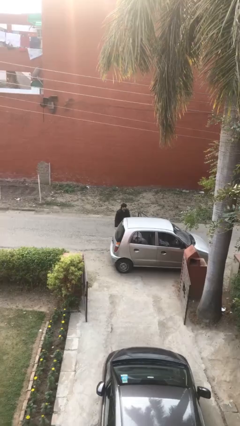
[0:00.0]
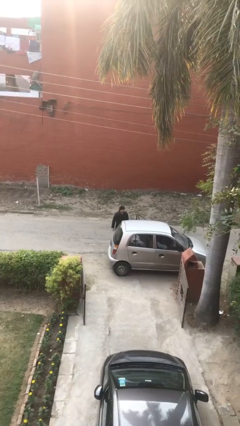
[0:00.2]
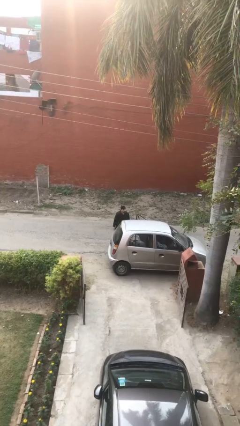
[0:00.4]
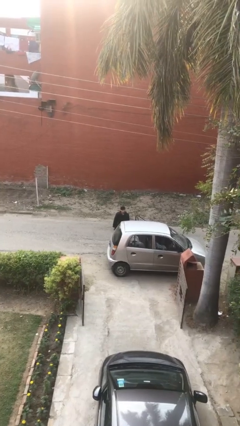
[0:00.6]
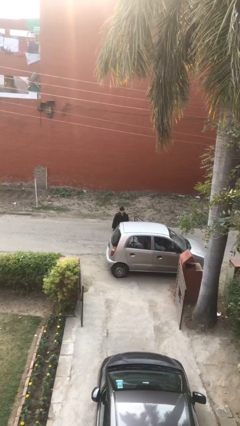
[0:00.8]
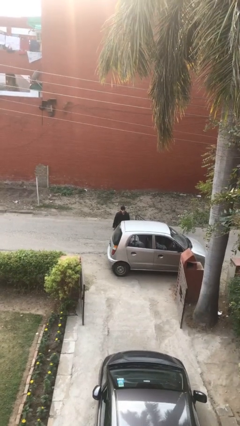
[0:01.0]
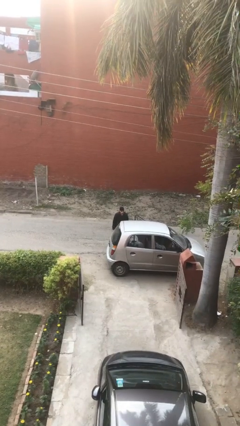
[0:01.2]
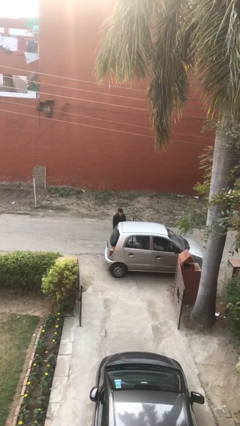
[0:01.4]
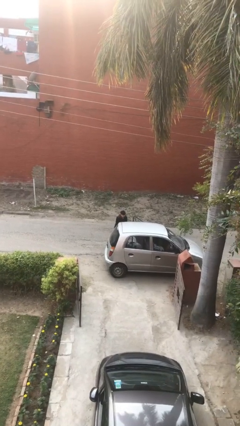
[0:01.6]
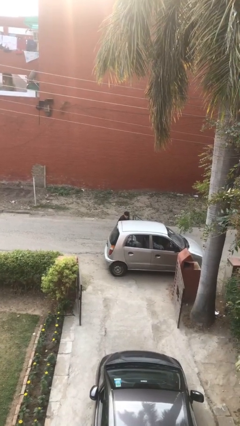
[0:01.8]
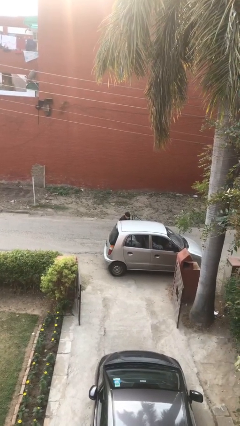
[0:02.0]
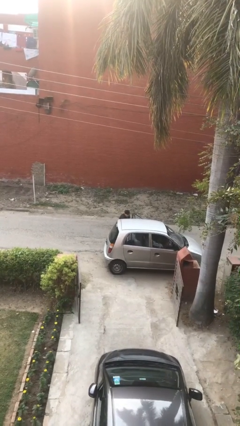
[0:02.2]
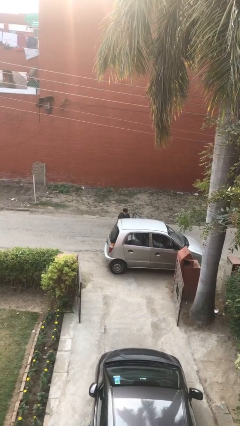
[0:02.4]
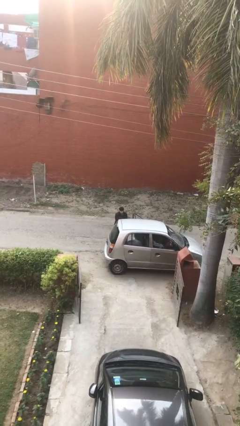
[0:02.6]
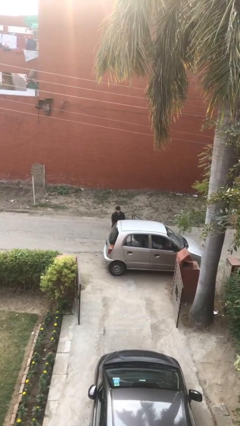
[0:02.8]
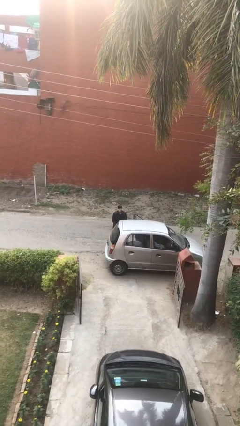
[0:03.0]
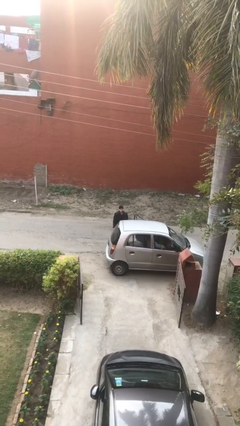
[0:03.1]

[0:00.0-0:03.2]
person unloads car

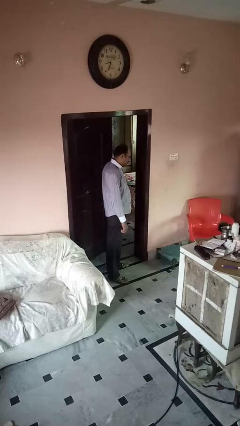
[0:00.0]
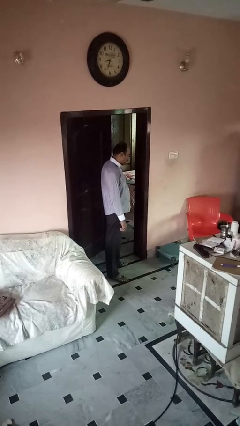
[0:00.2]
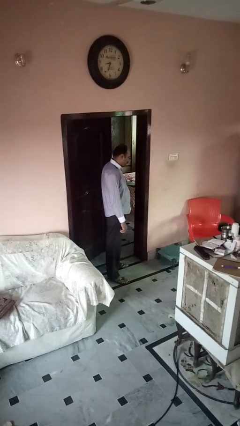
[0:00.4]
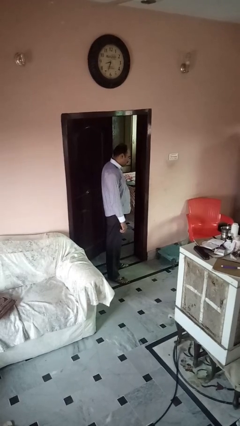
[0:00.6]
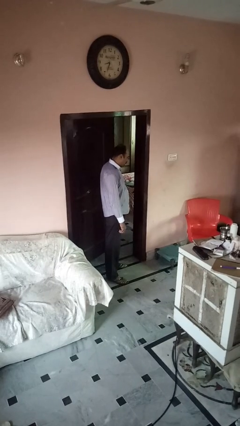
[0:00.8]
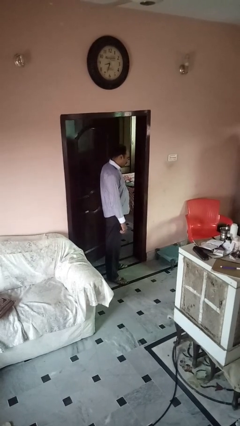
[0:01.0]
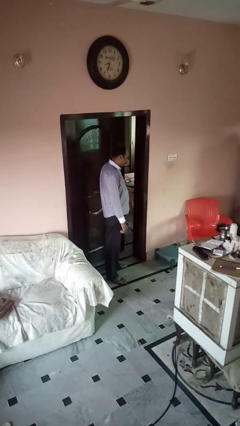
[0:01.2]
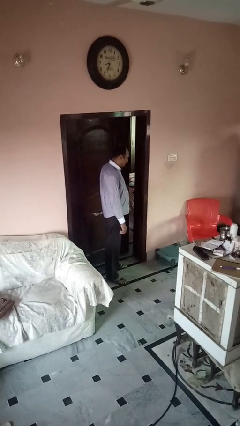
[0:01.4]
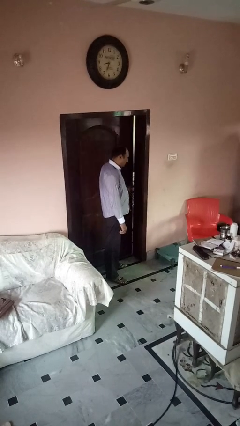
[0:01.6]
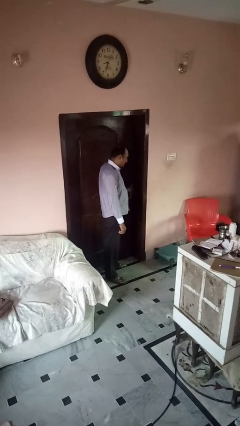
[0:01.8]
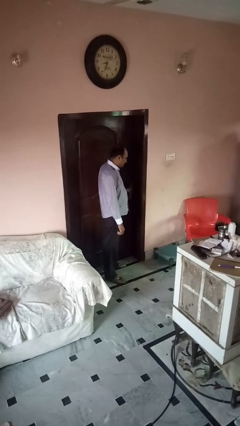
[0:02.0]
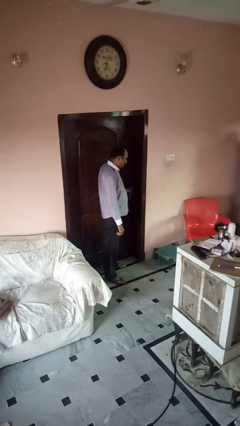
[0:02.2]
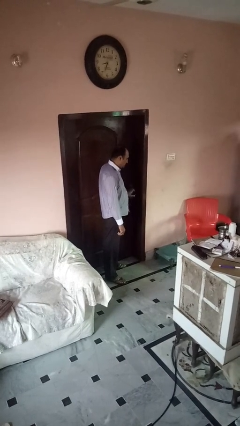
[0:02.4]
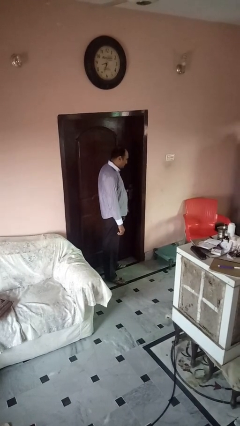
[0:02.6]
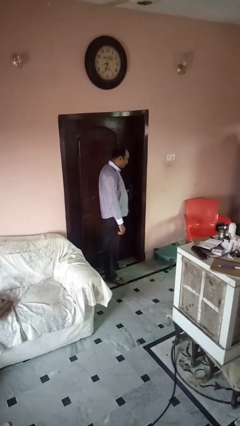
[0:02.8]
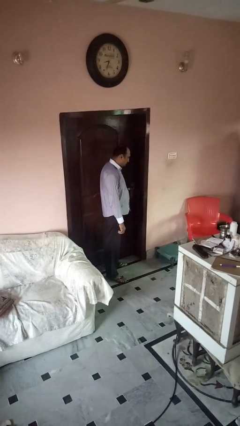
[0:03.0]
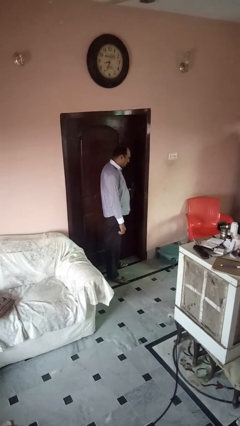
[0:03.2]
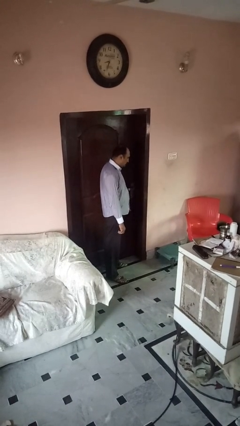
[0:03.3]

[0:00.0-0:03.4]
person closes gate

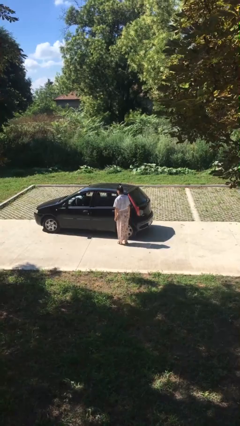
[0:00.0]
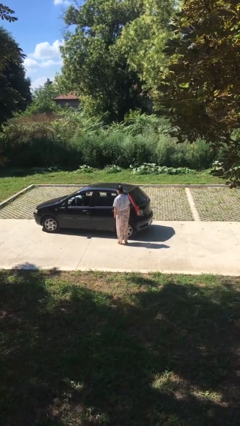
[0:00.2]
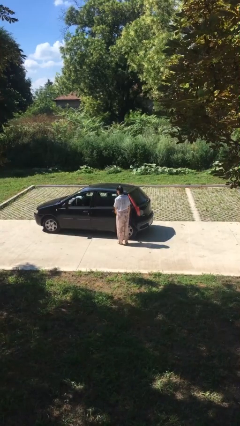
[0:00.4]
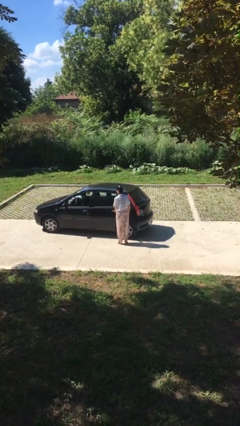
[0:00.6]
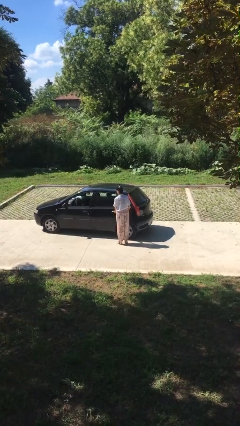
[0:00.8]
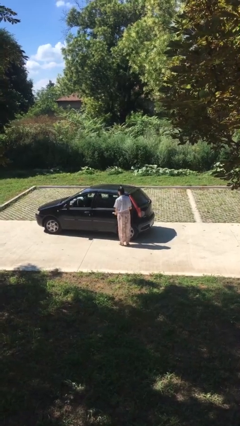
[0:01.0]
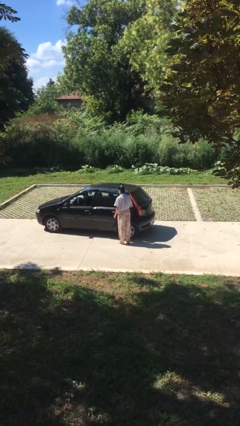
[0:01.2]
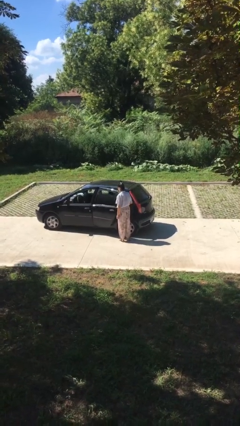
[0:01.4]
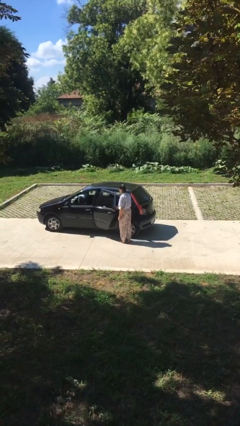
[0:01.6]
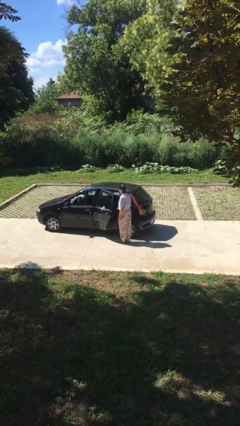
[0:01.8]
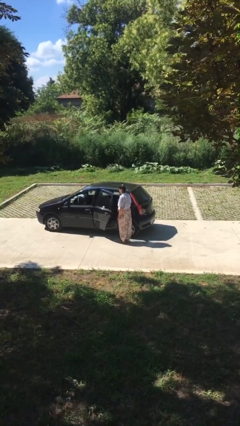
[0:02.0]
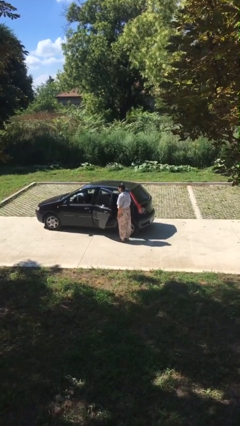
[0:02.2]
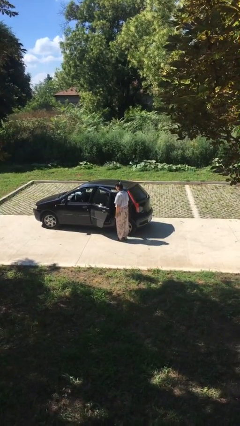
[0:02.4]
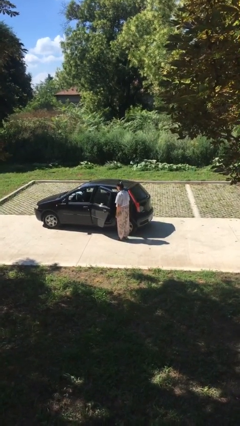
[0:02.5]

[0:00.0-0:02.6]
person opens car door

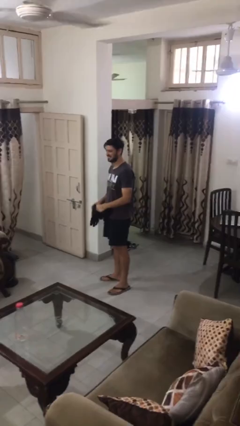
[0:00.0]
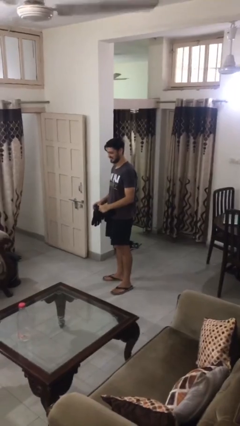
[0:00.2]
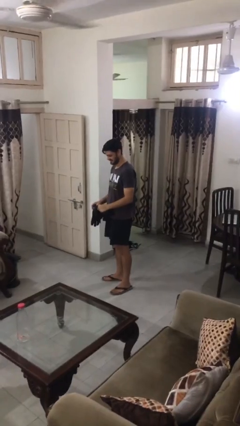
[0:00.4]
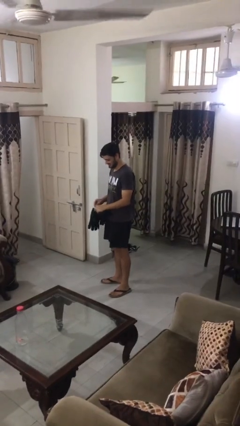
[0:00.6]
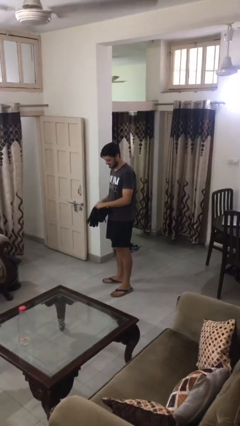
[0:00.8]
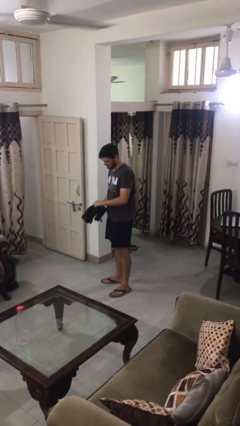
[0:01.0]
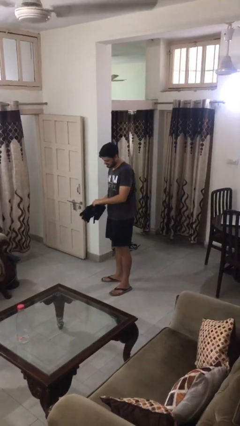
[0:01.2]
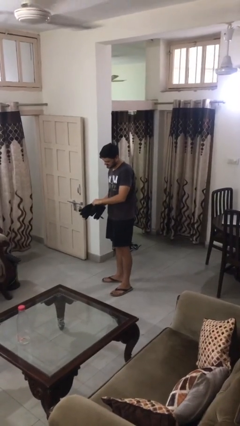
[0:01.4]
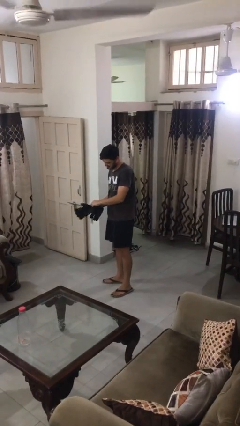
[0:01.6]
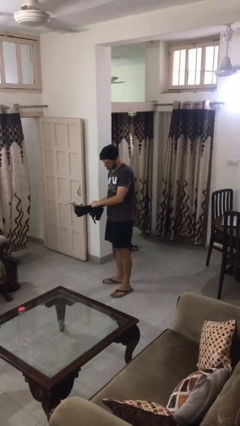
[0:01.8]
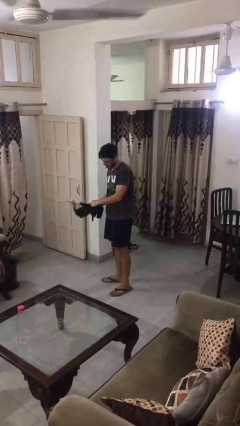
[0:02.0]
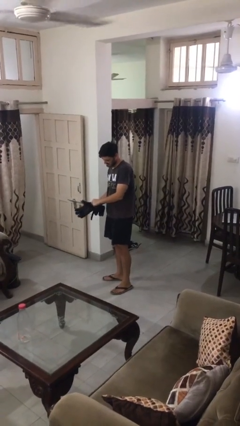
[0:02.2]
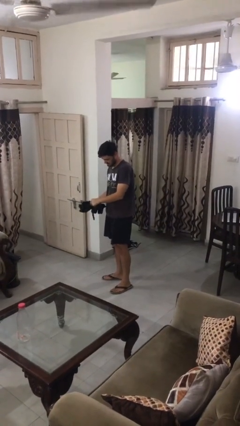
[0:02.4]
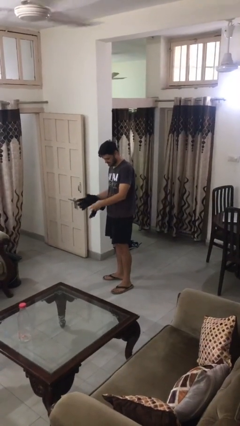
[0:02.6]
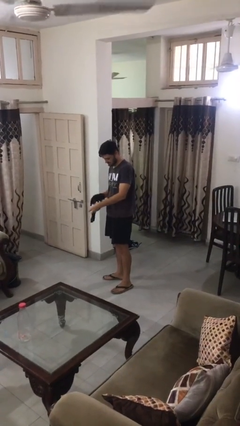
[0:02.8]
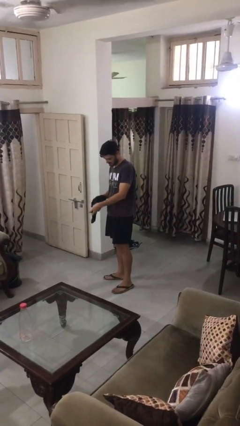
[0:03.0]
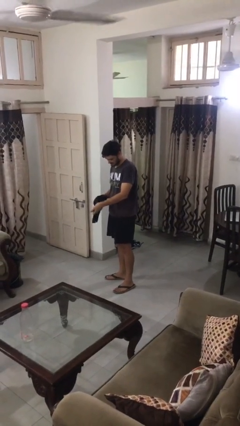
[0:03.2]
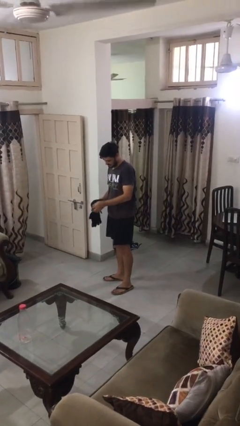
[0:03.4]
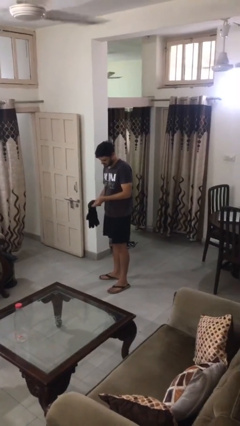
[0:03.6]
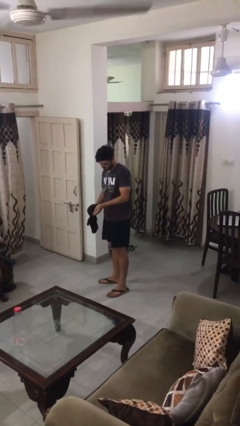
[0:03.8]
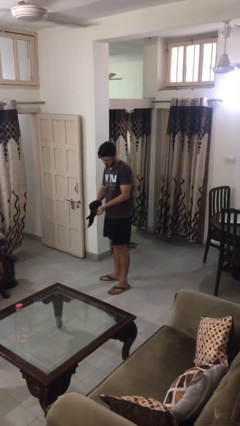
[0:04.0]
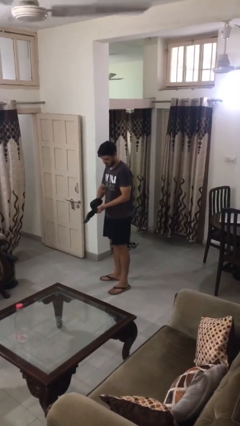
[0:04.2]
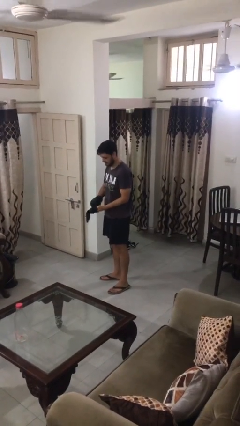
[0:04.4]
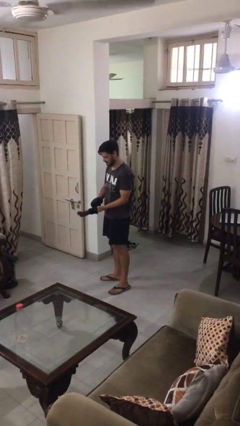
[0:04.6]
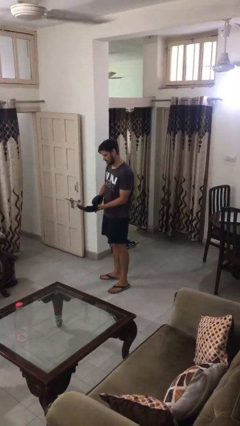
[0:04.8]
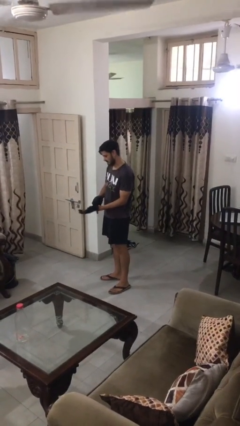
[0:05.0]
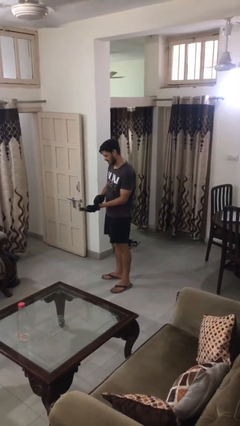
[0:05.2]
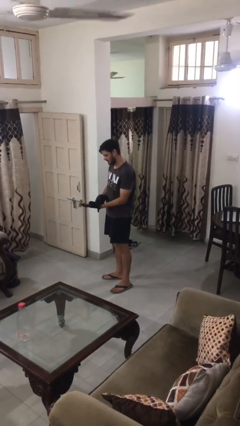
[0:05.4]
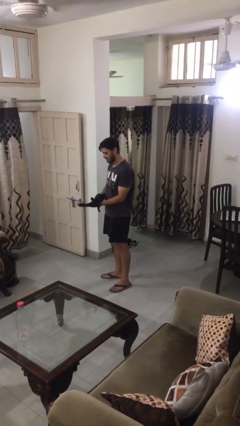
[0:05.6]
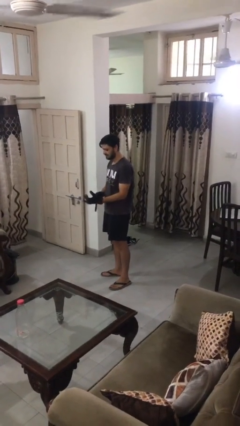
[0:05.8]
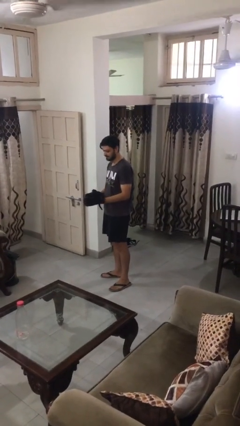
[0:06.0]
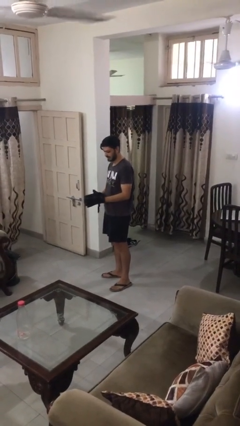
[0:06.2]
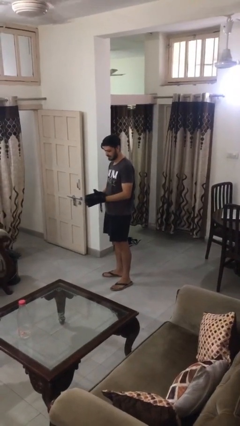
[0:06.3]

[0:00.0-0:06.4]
person puts on gloves

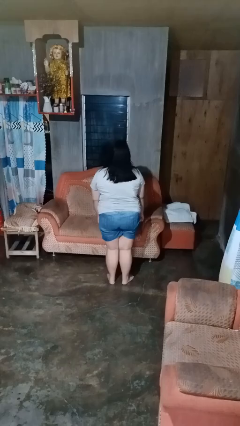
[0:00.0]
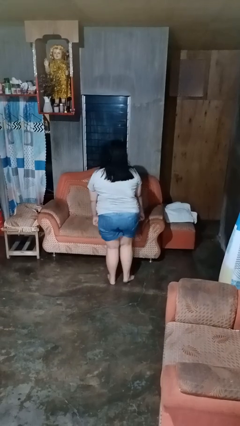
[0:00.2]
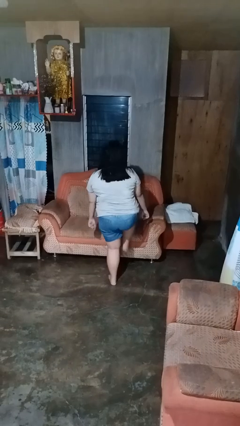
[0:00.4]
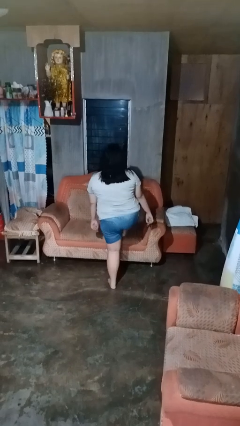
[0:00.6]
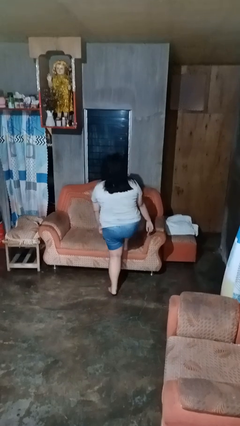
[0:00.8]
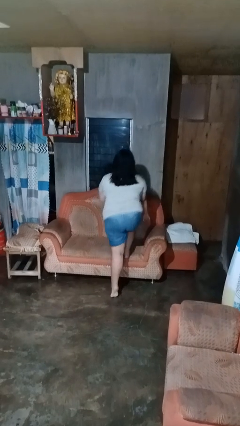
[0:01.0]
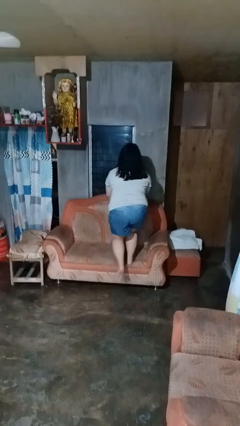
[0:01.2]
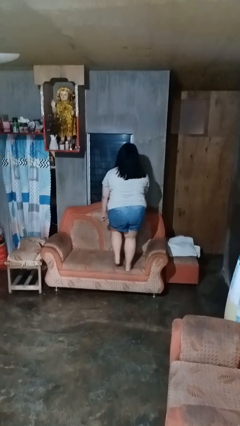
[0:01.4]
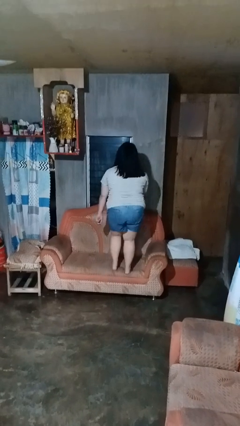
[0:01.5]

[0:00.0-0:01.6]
person climbs on couch

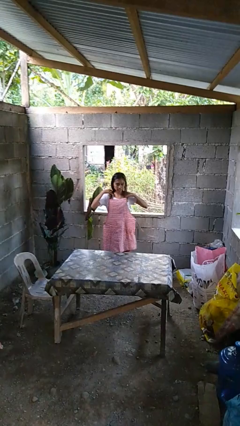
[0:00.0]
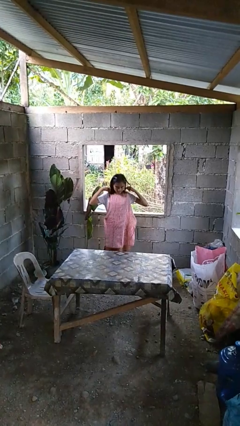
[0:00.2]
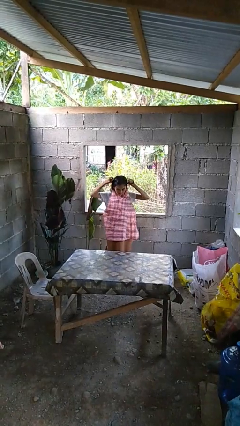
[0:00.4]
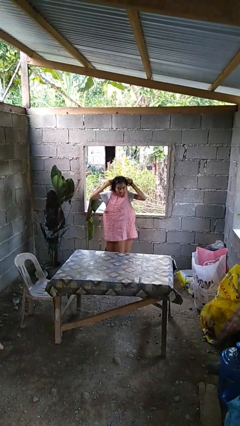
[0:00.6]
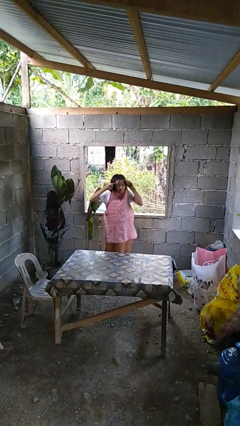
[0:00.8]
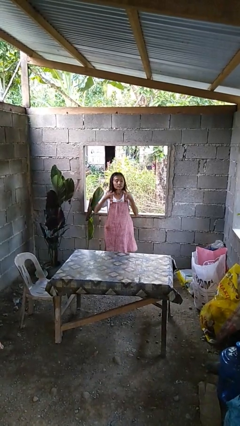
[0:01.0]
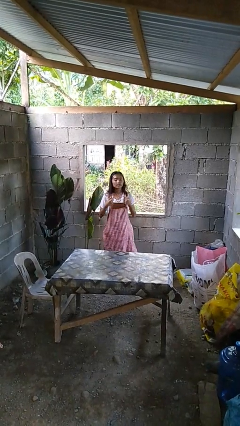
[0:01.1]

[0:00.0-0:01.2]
person takes off apron
